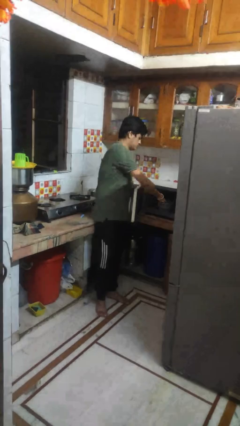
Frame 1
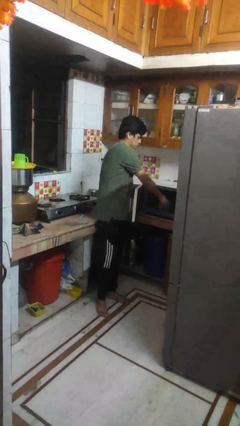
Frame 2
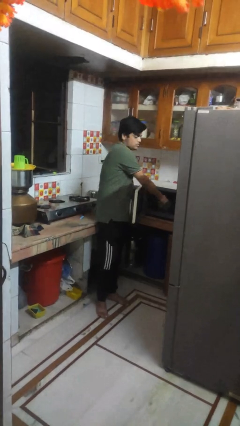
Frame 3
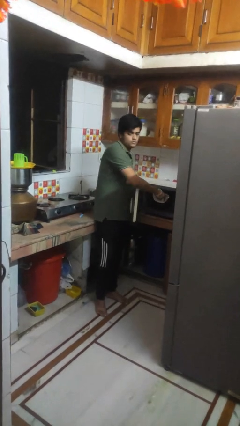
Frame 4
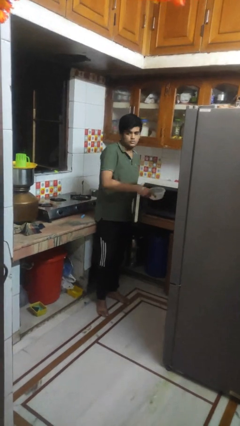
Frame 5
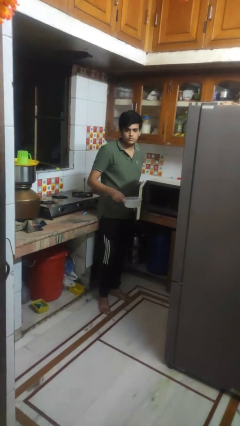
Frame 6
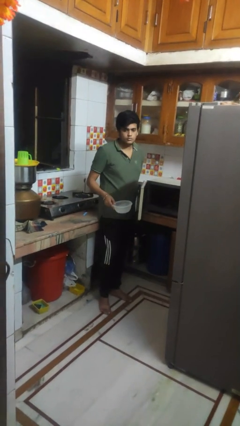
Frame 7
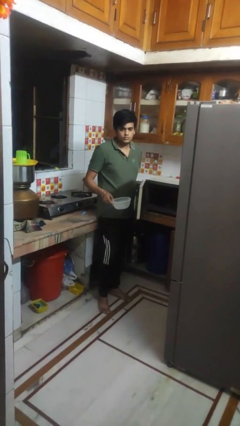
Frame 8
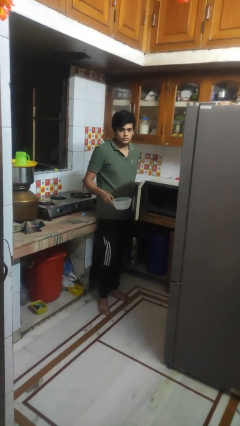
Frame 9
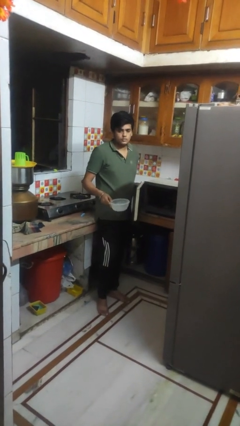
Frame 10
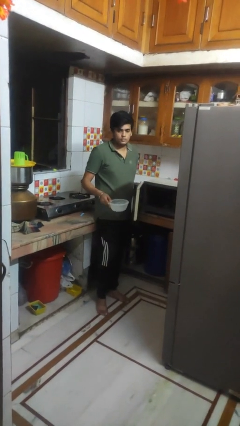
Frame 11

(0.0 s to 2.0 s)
person takes object from microwave

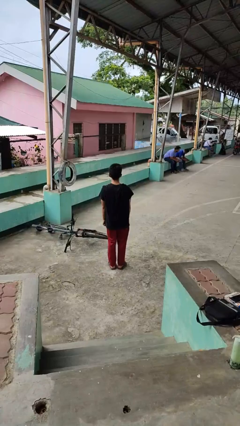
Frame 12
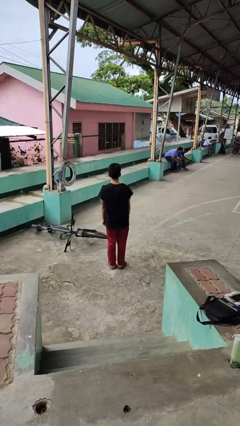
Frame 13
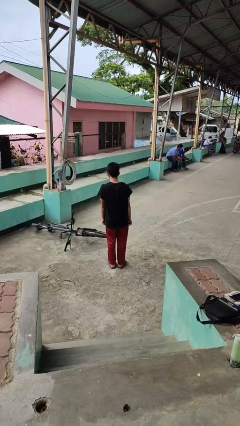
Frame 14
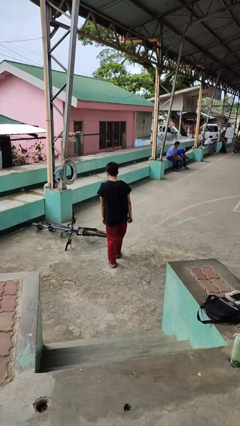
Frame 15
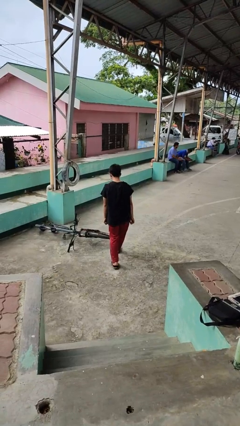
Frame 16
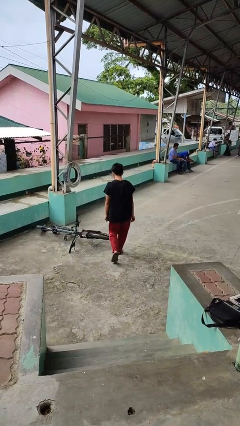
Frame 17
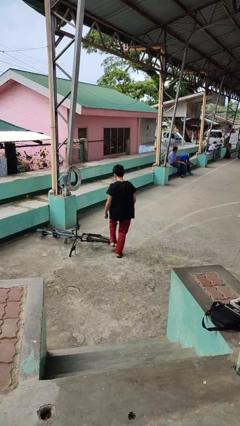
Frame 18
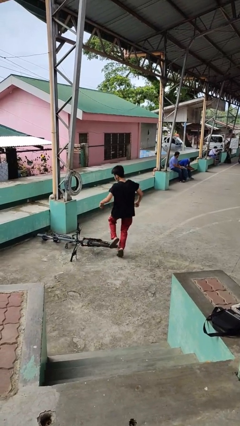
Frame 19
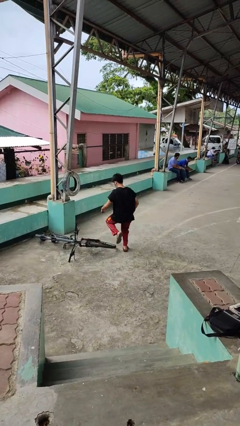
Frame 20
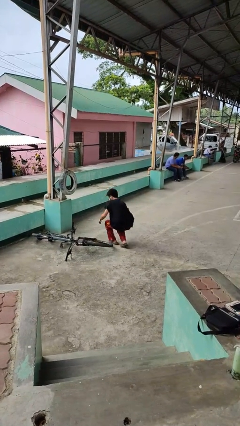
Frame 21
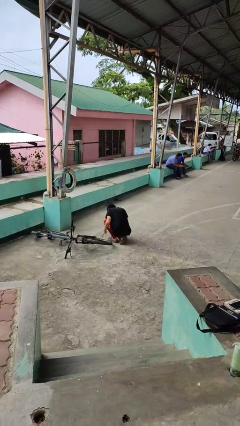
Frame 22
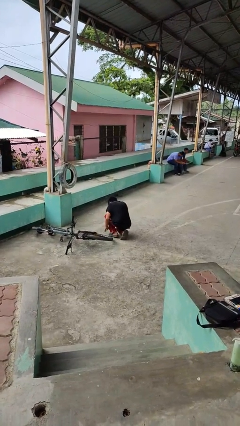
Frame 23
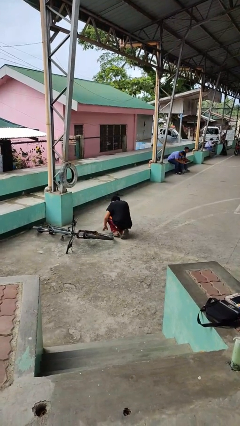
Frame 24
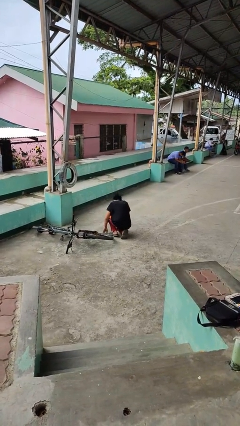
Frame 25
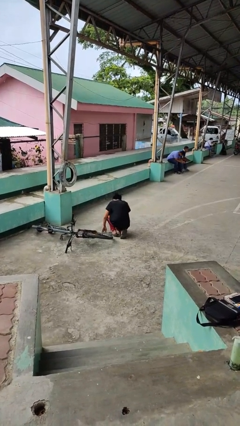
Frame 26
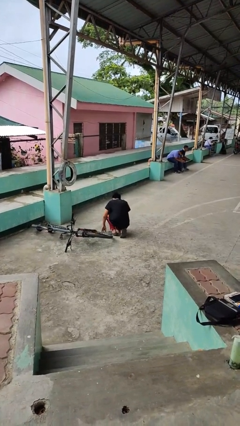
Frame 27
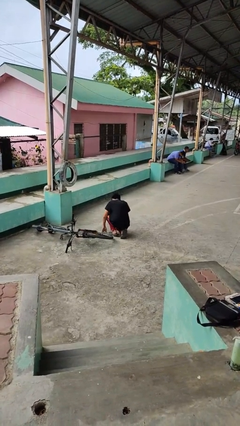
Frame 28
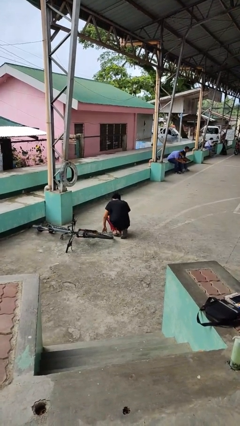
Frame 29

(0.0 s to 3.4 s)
person trips on object on floor

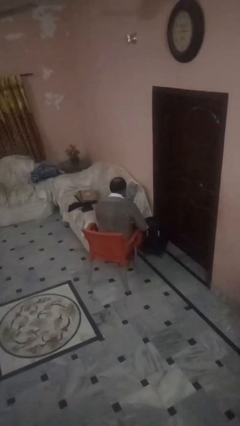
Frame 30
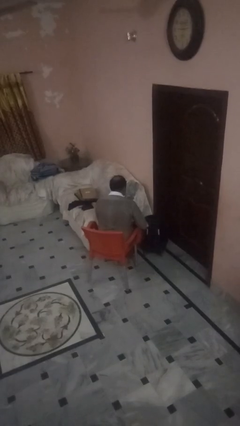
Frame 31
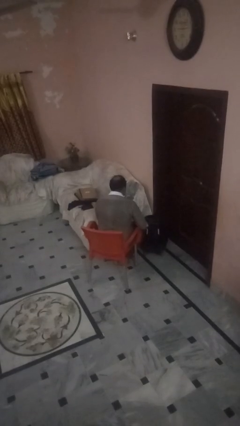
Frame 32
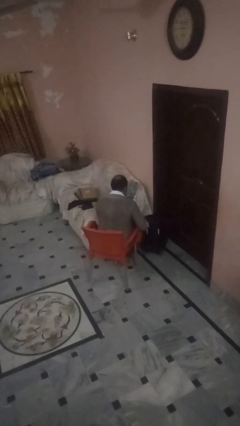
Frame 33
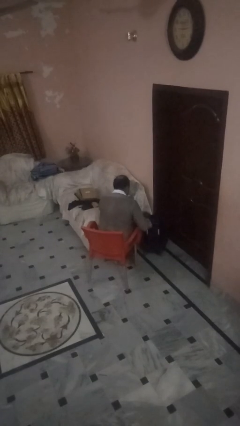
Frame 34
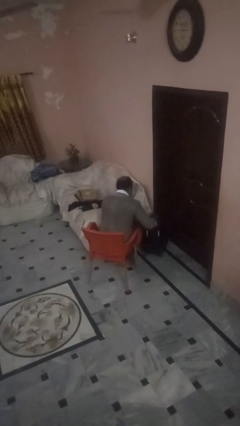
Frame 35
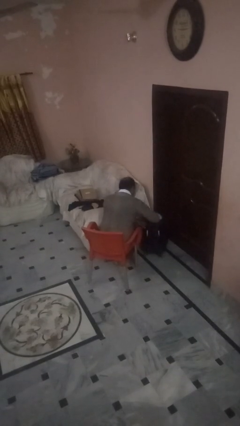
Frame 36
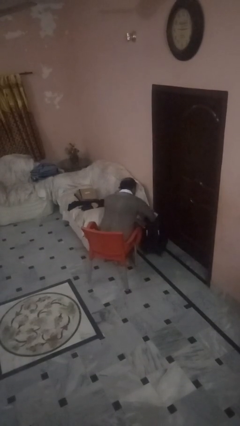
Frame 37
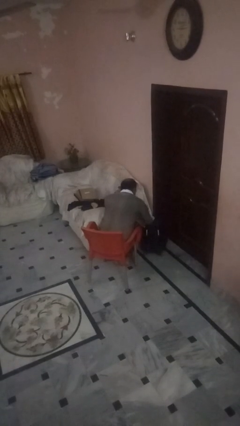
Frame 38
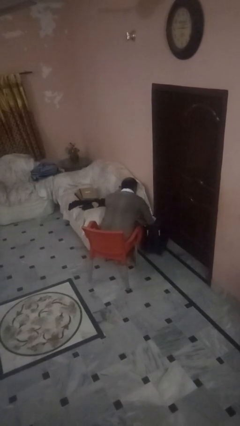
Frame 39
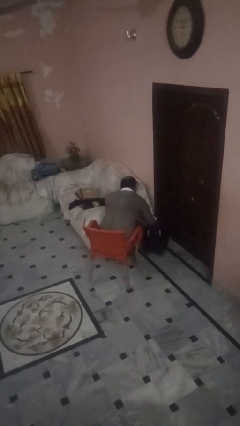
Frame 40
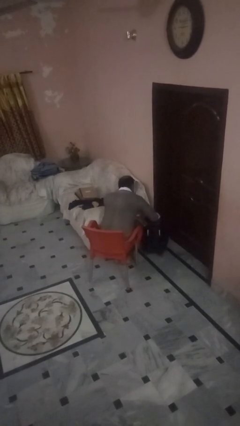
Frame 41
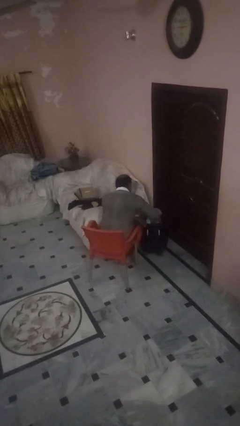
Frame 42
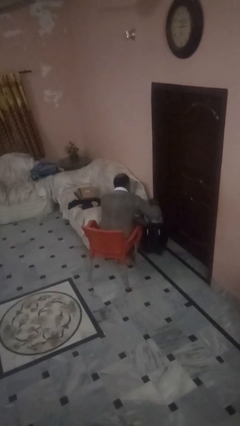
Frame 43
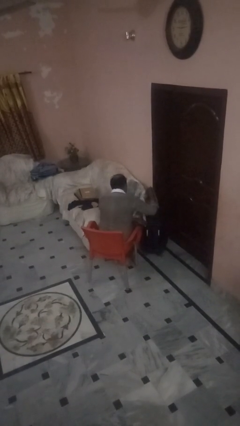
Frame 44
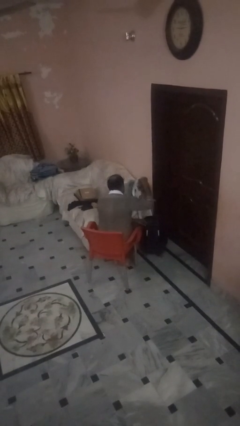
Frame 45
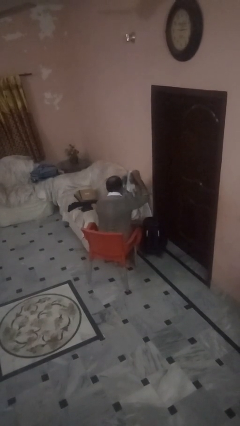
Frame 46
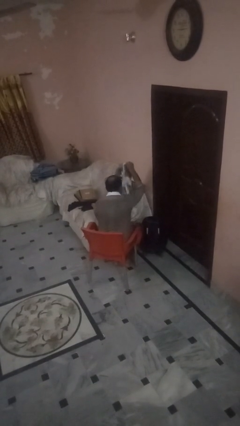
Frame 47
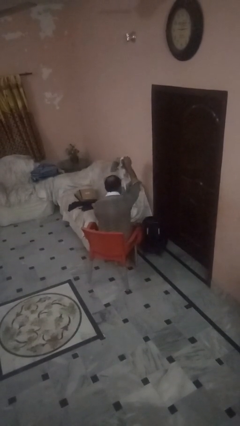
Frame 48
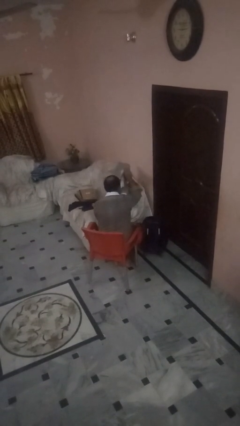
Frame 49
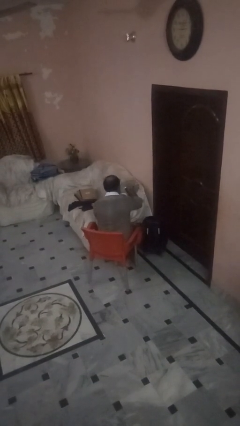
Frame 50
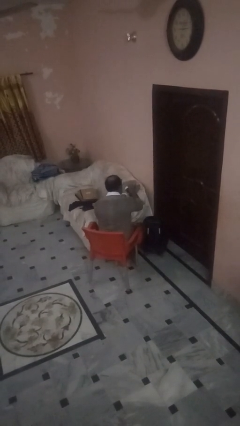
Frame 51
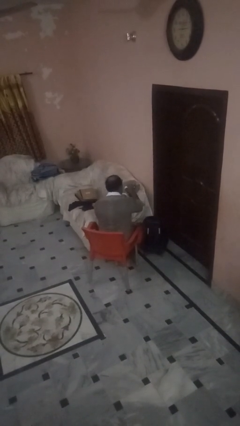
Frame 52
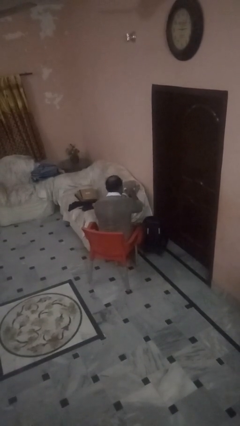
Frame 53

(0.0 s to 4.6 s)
person unloads clothes from suitcase

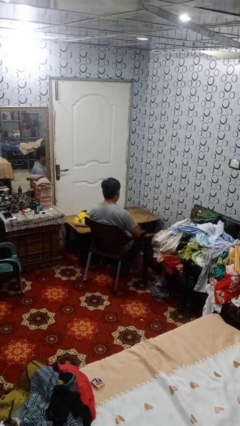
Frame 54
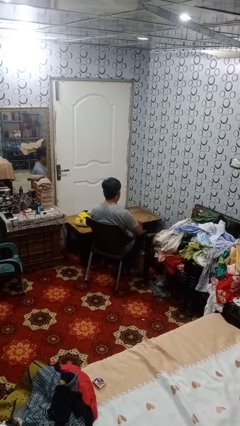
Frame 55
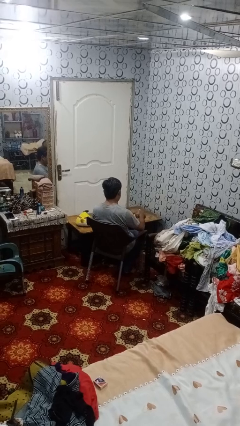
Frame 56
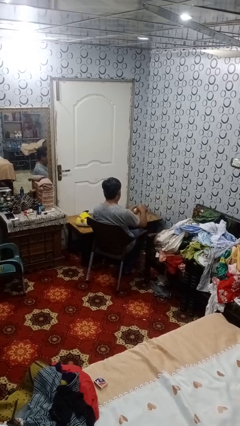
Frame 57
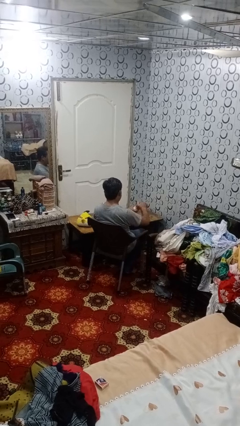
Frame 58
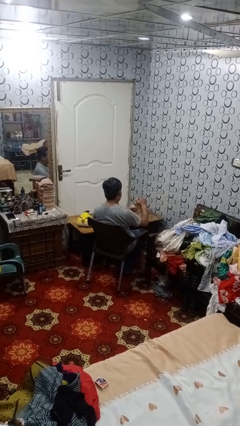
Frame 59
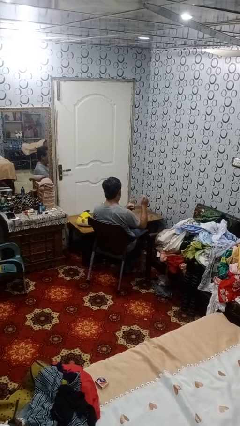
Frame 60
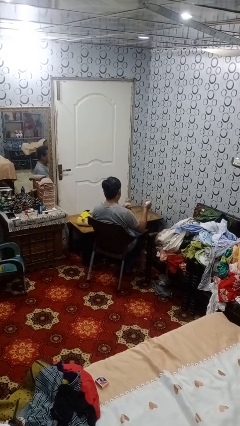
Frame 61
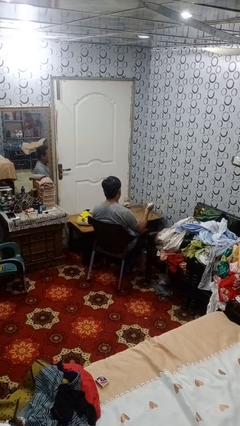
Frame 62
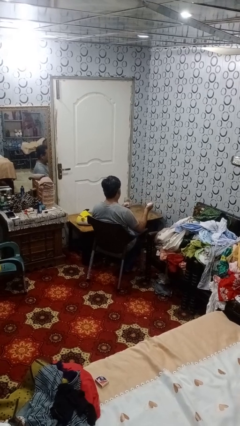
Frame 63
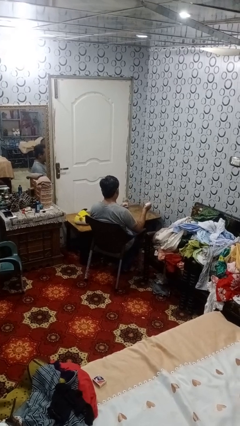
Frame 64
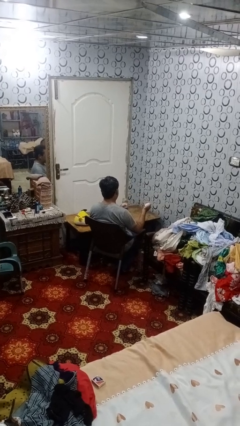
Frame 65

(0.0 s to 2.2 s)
person opens jar

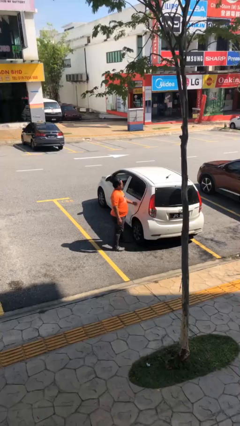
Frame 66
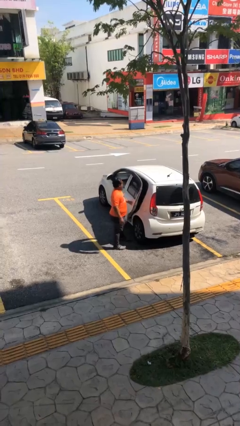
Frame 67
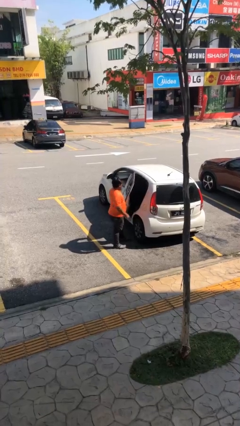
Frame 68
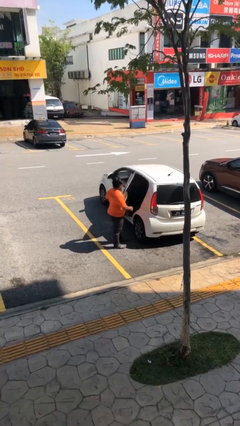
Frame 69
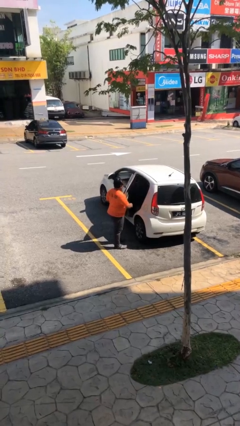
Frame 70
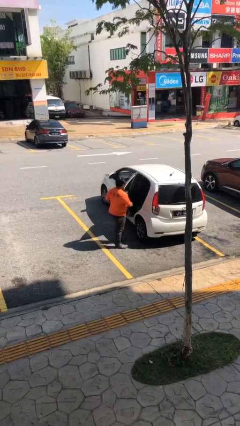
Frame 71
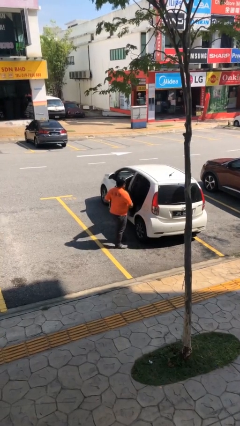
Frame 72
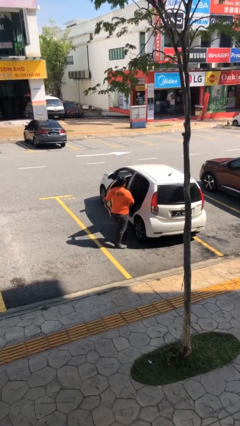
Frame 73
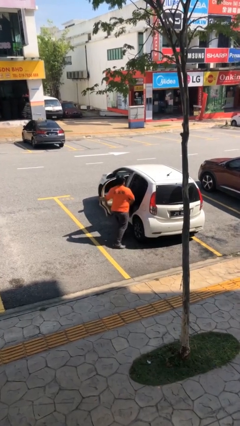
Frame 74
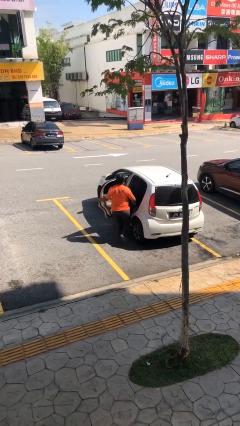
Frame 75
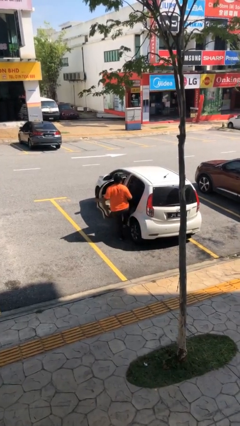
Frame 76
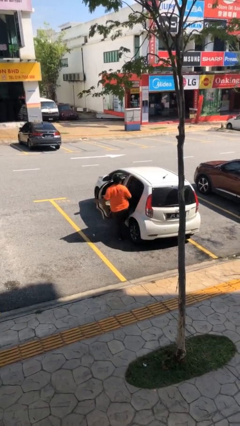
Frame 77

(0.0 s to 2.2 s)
person opens car door

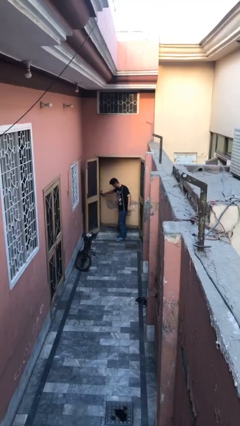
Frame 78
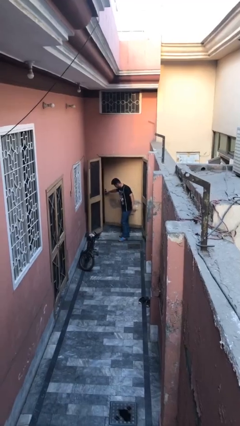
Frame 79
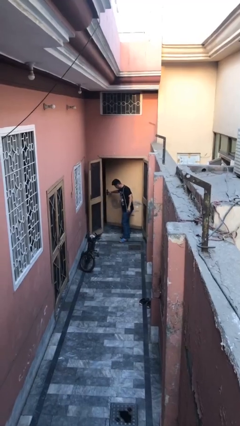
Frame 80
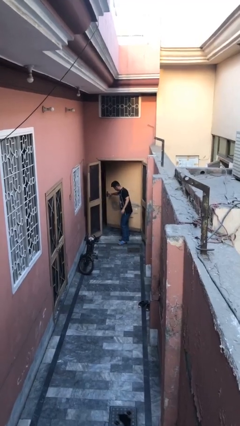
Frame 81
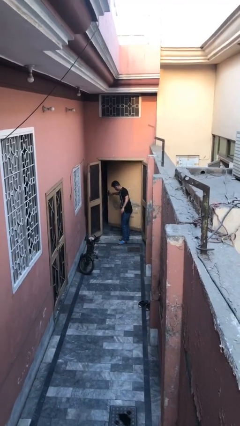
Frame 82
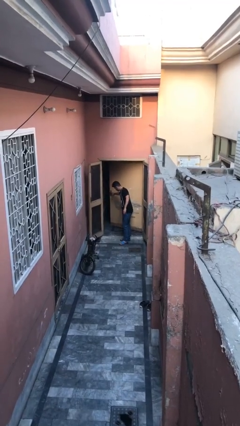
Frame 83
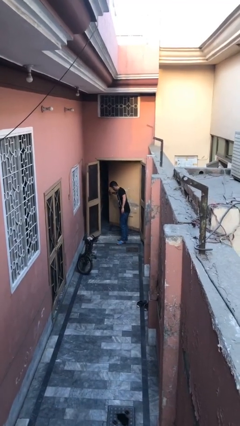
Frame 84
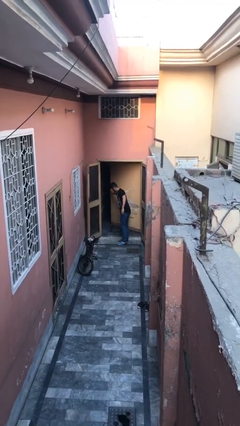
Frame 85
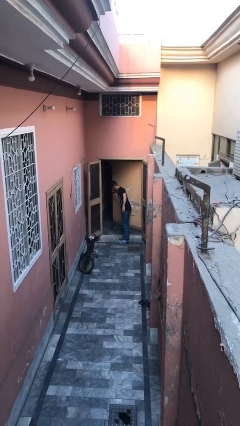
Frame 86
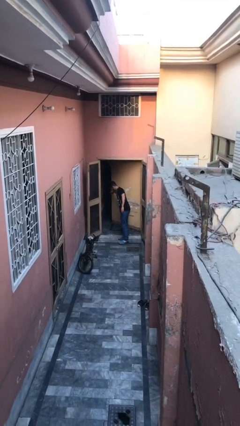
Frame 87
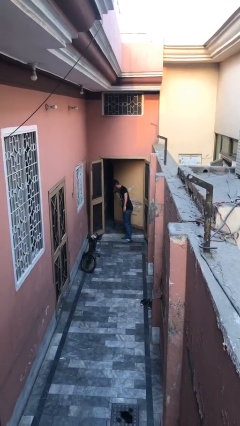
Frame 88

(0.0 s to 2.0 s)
person opens facility door

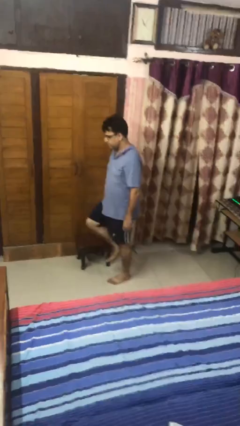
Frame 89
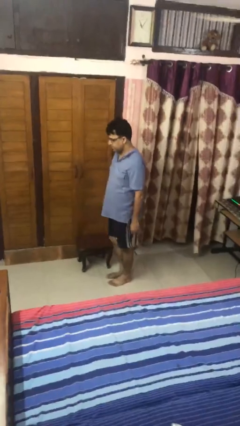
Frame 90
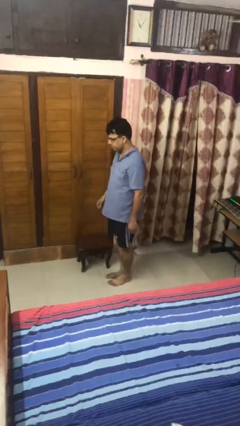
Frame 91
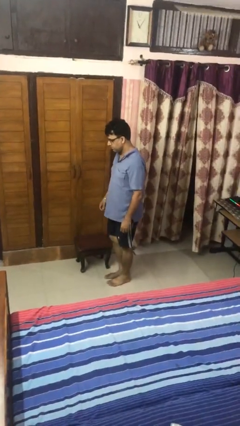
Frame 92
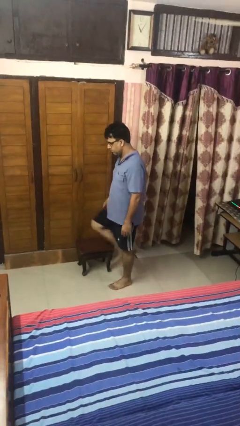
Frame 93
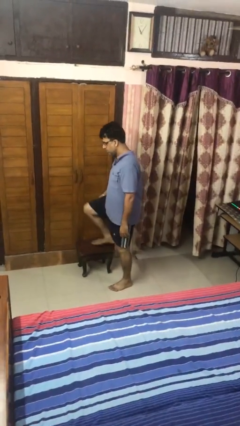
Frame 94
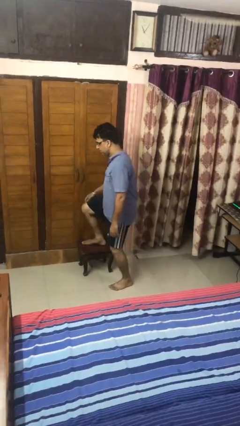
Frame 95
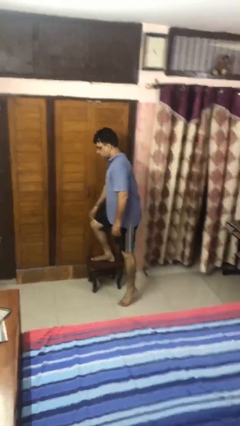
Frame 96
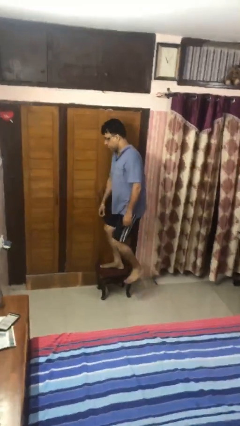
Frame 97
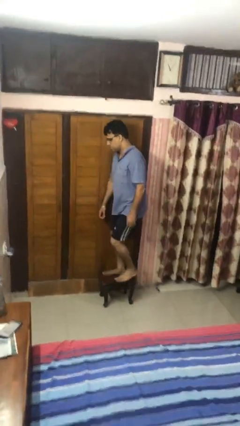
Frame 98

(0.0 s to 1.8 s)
person climbs on table
